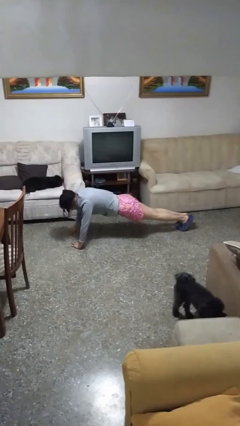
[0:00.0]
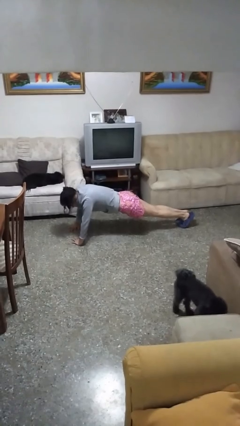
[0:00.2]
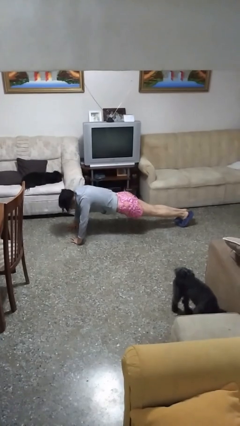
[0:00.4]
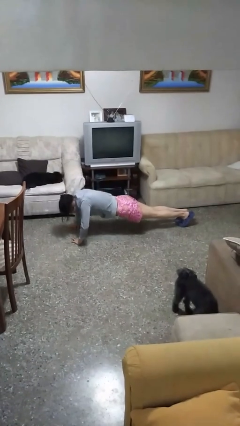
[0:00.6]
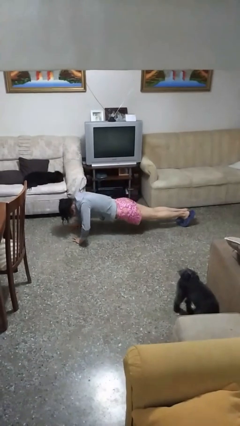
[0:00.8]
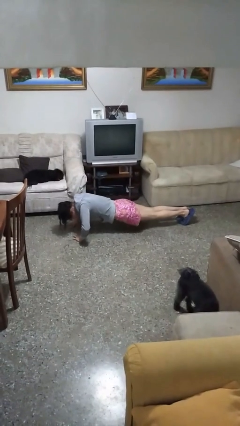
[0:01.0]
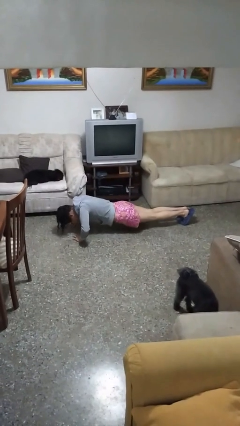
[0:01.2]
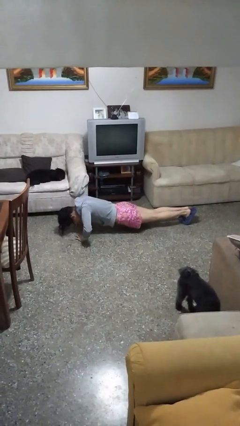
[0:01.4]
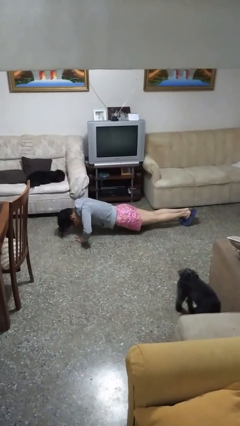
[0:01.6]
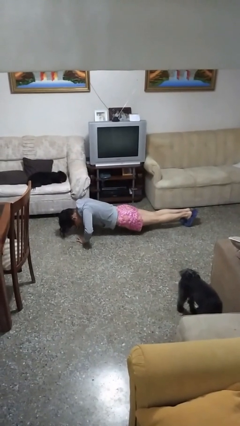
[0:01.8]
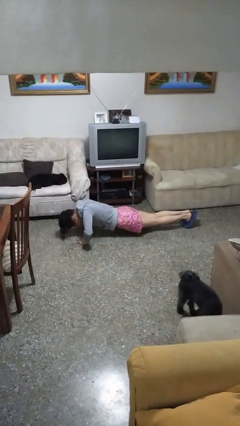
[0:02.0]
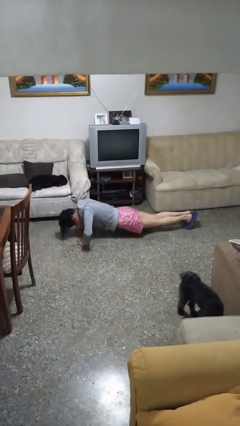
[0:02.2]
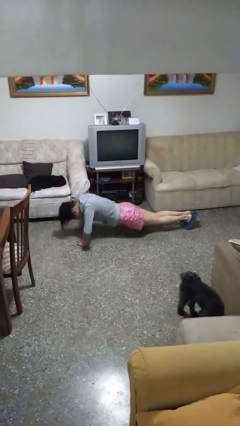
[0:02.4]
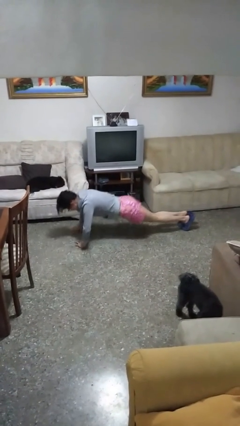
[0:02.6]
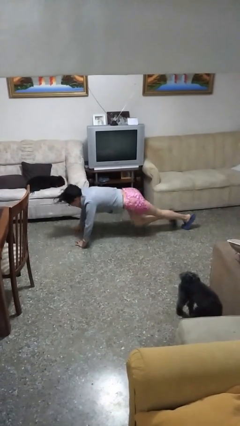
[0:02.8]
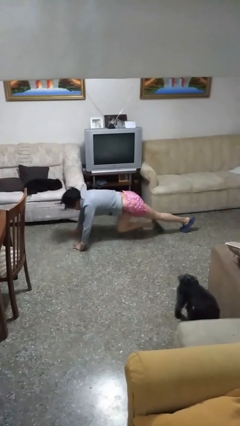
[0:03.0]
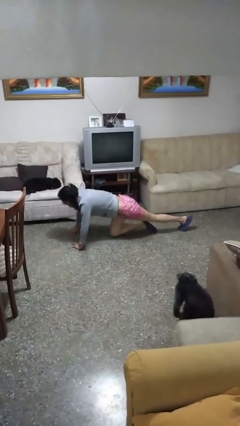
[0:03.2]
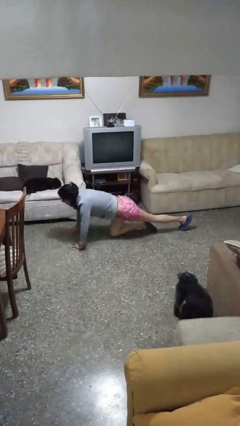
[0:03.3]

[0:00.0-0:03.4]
person exercises with pushup

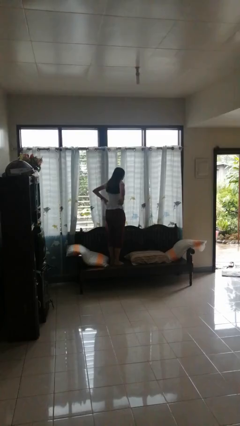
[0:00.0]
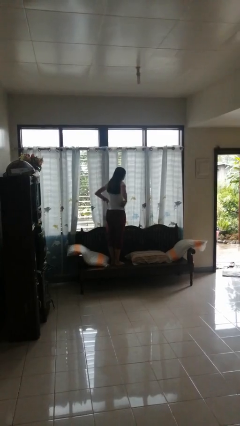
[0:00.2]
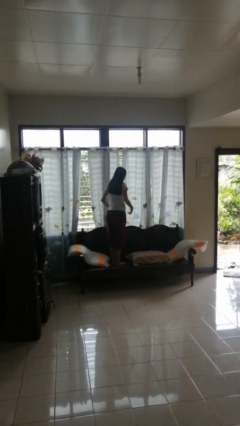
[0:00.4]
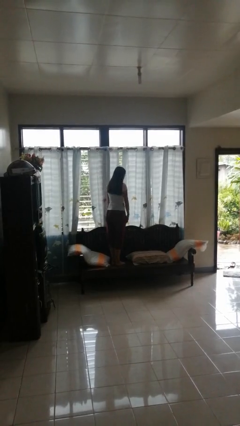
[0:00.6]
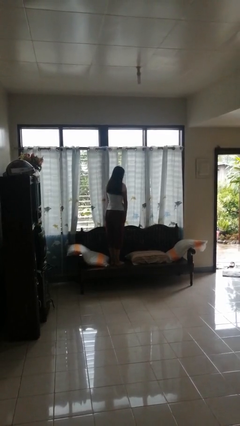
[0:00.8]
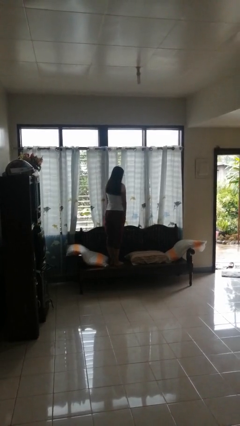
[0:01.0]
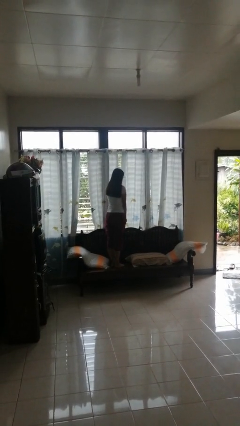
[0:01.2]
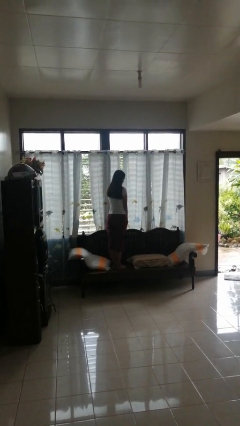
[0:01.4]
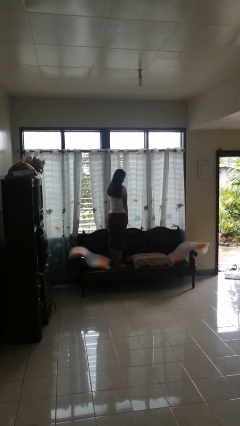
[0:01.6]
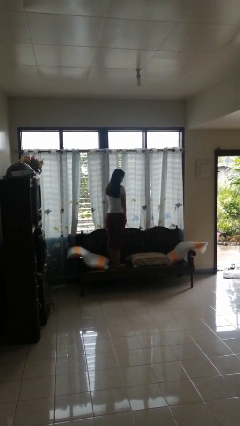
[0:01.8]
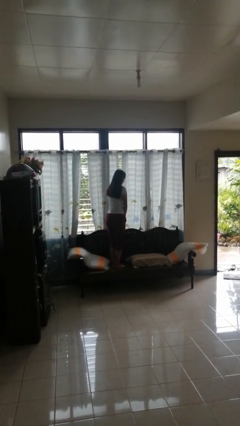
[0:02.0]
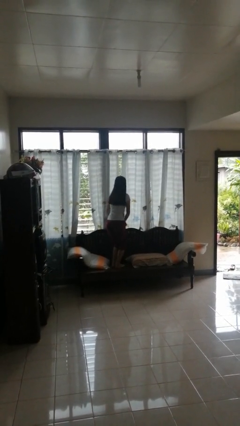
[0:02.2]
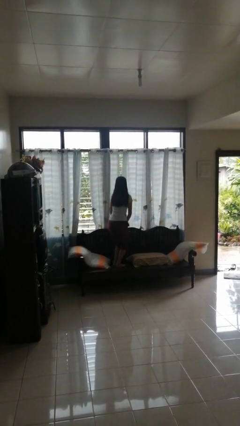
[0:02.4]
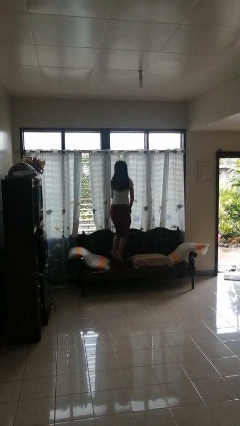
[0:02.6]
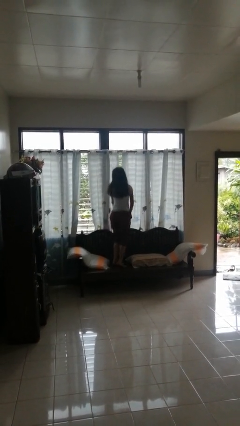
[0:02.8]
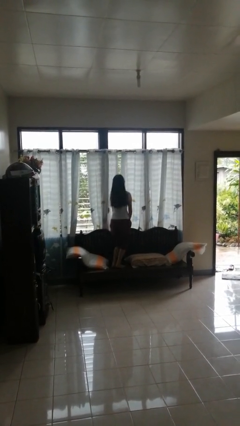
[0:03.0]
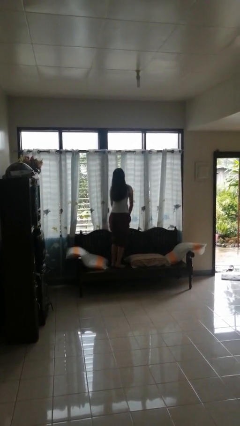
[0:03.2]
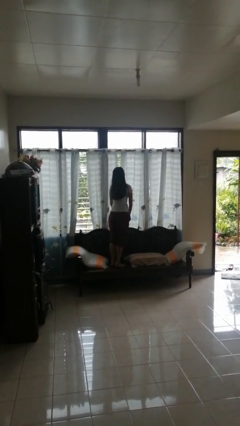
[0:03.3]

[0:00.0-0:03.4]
person jumps on couch

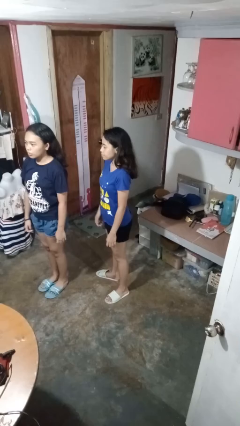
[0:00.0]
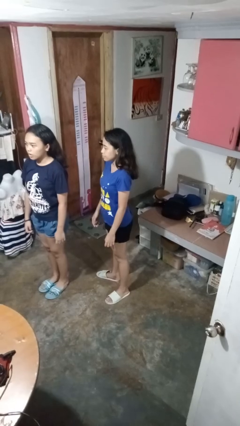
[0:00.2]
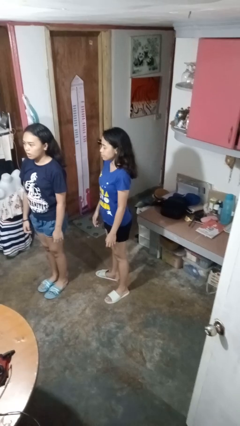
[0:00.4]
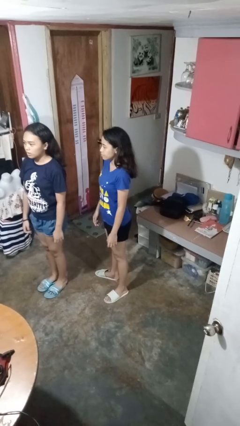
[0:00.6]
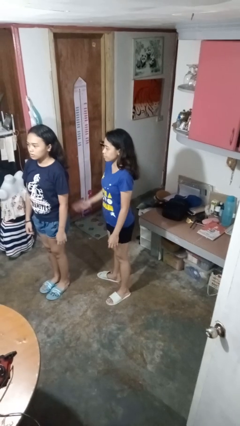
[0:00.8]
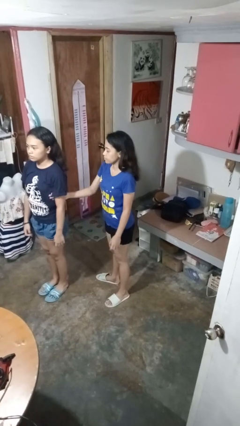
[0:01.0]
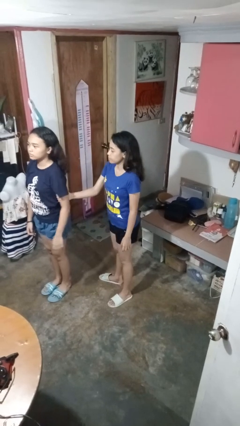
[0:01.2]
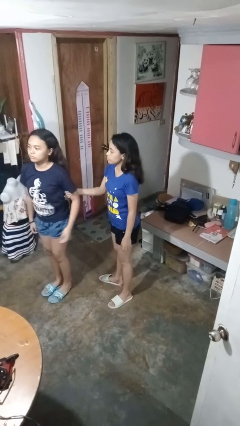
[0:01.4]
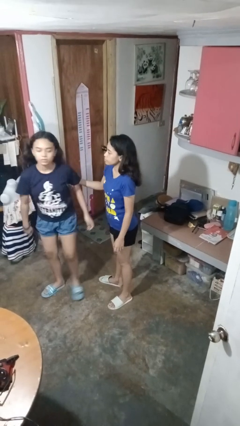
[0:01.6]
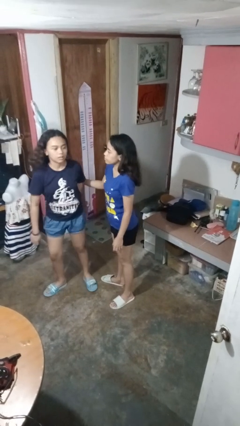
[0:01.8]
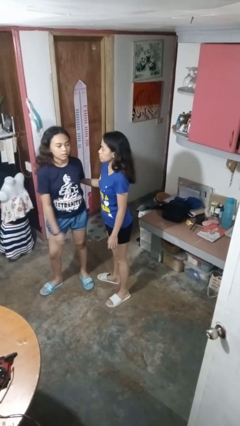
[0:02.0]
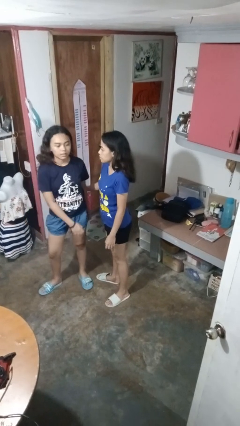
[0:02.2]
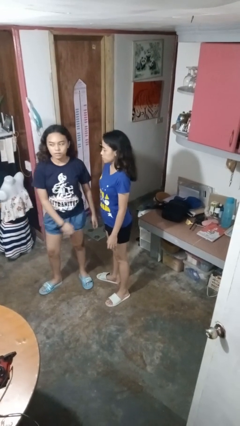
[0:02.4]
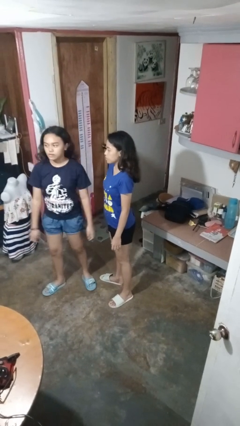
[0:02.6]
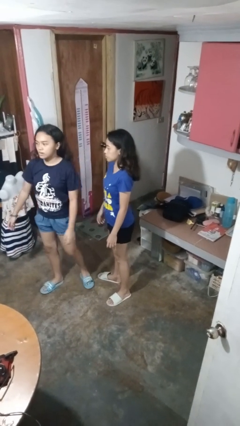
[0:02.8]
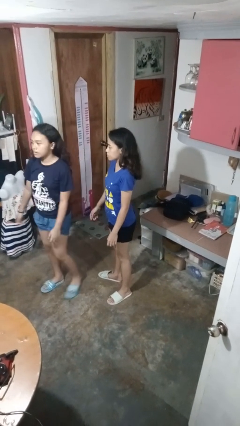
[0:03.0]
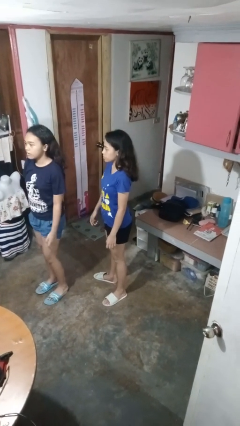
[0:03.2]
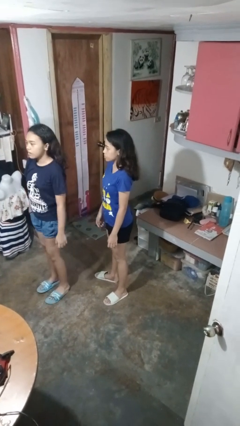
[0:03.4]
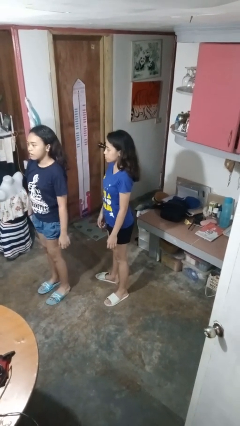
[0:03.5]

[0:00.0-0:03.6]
person grabs person by bicep

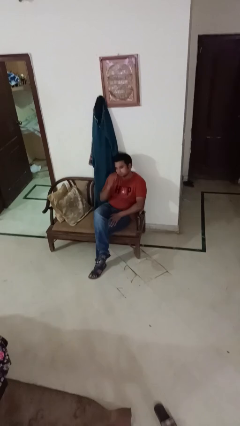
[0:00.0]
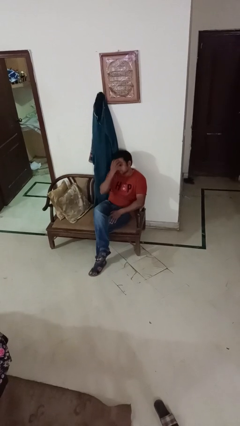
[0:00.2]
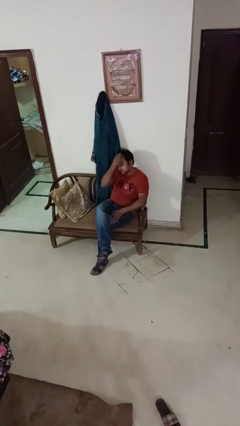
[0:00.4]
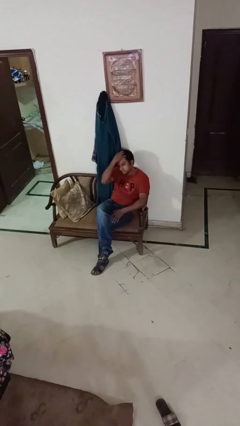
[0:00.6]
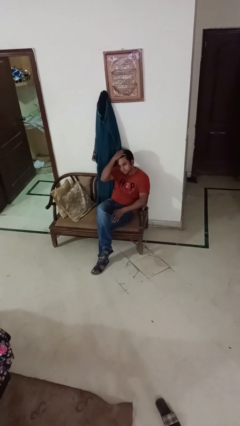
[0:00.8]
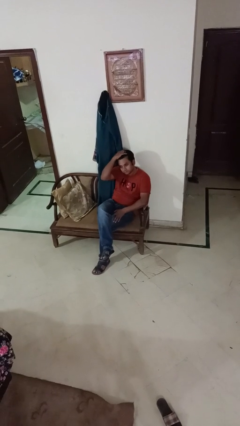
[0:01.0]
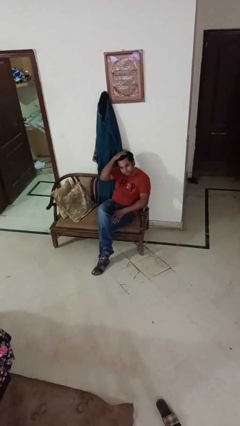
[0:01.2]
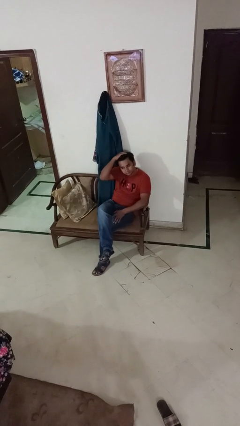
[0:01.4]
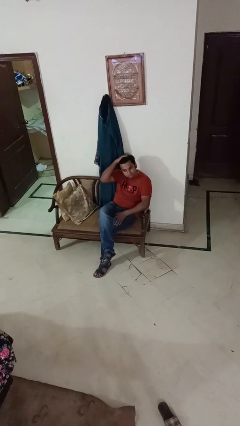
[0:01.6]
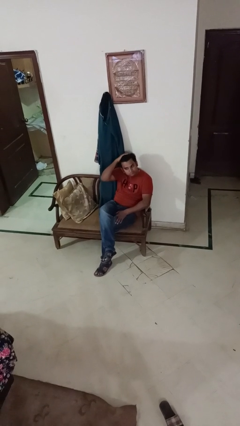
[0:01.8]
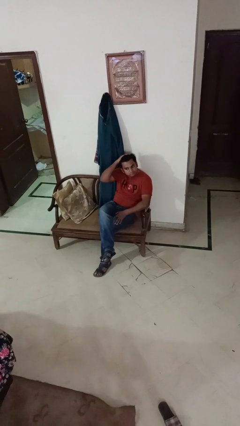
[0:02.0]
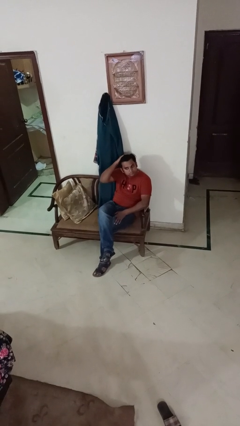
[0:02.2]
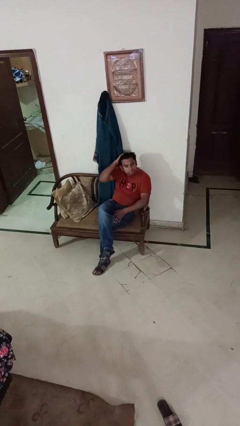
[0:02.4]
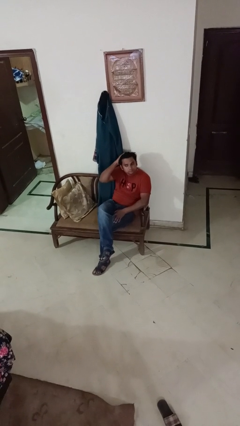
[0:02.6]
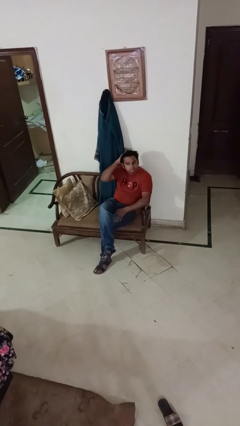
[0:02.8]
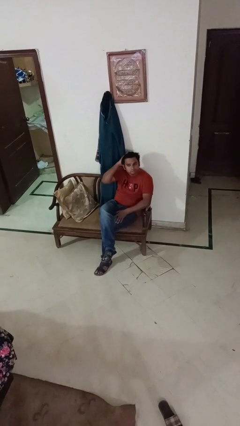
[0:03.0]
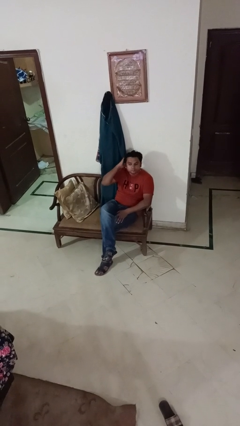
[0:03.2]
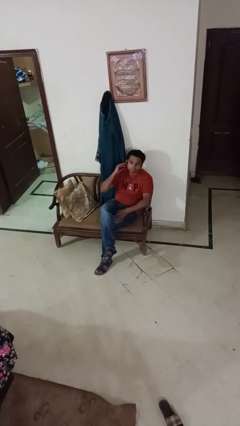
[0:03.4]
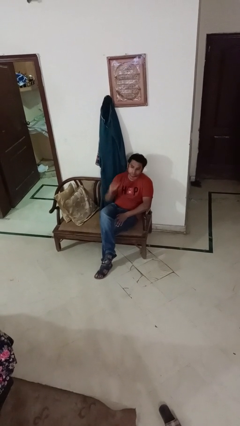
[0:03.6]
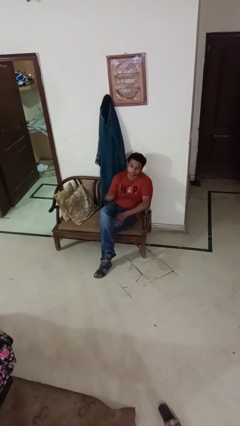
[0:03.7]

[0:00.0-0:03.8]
person strokes hair

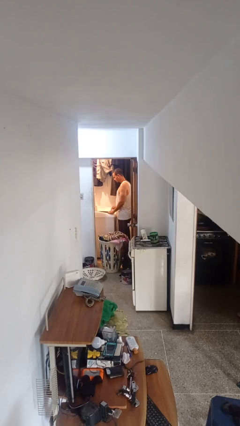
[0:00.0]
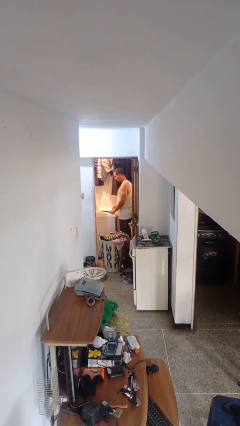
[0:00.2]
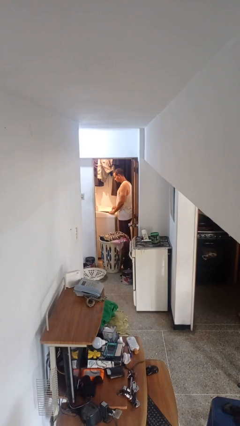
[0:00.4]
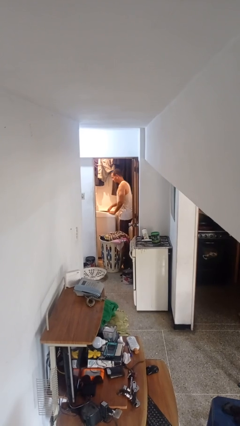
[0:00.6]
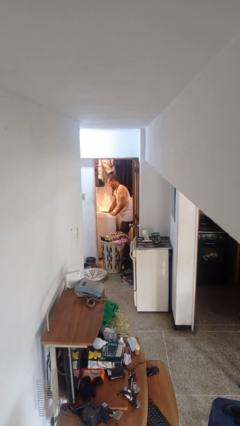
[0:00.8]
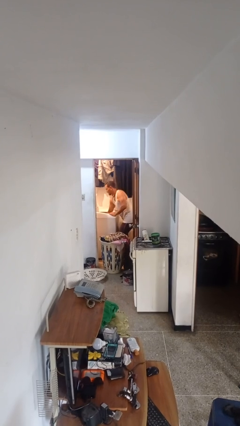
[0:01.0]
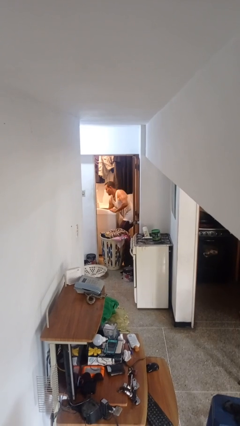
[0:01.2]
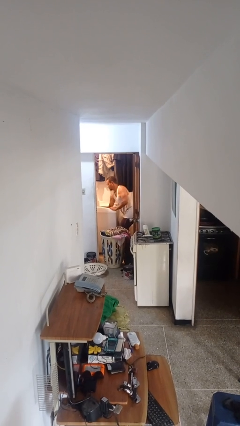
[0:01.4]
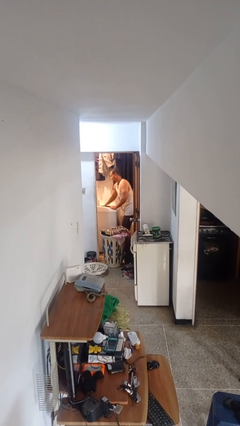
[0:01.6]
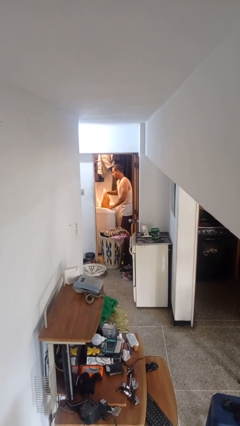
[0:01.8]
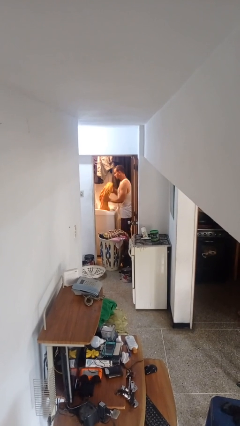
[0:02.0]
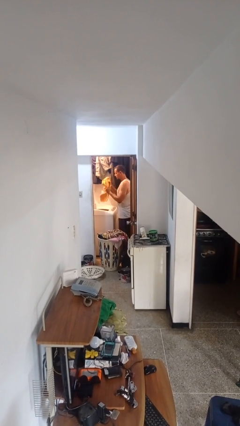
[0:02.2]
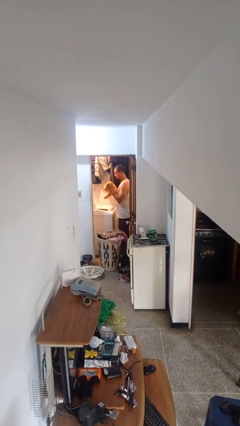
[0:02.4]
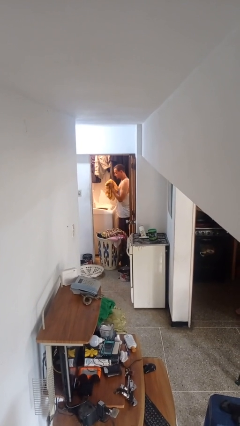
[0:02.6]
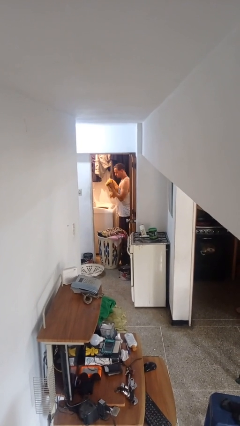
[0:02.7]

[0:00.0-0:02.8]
person unloads clotheswasher

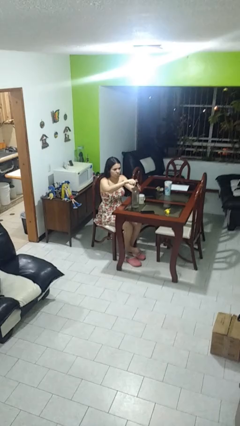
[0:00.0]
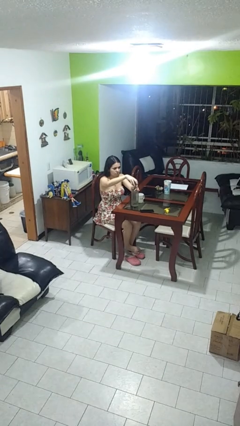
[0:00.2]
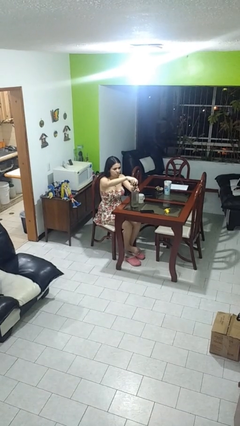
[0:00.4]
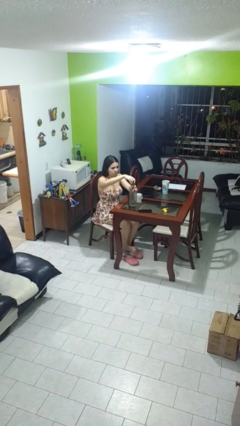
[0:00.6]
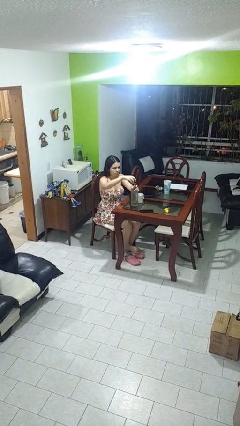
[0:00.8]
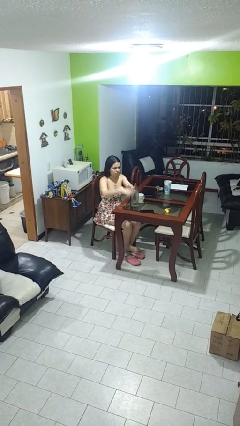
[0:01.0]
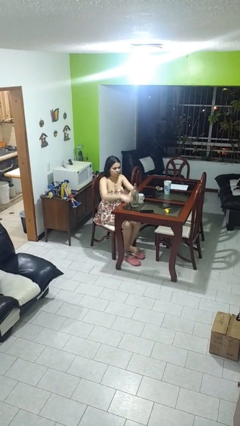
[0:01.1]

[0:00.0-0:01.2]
person unscrews lid from bottle
